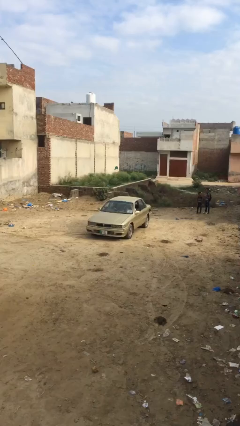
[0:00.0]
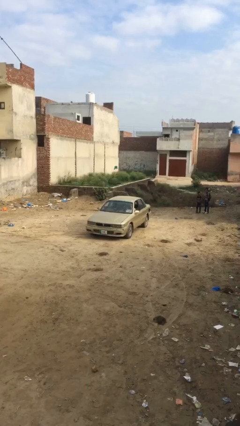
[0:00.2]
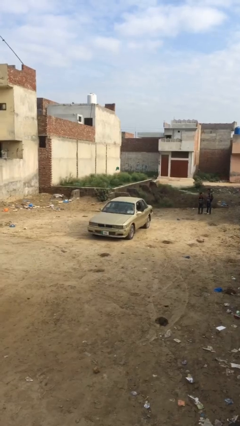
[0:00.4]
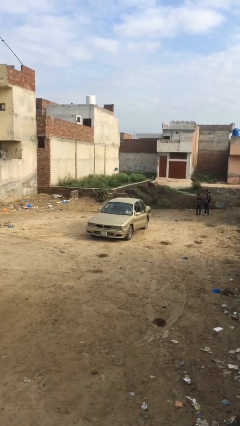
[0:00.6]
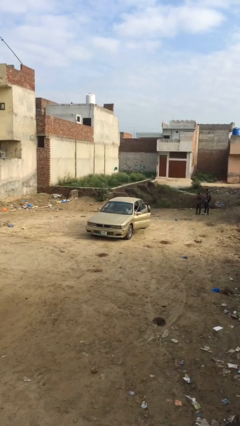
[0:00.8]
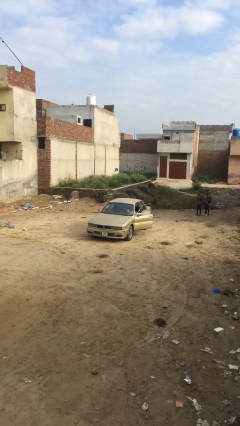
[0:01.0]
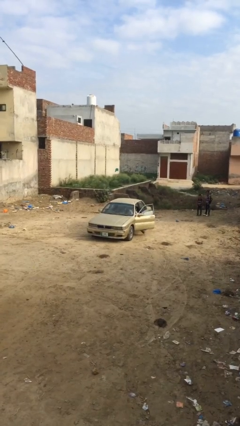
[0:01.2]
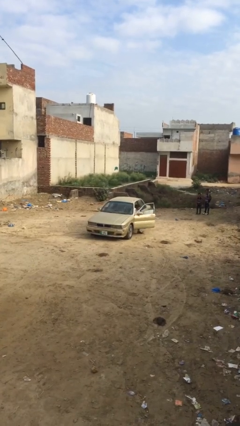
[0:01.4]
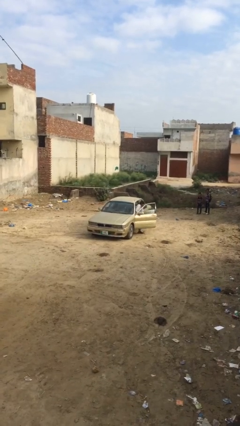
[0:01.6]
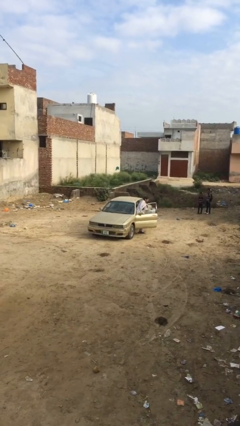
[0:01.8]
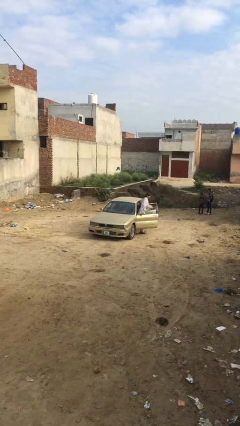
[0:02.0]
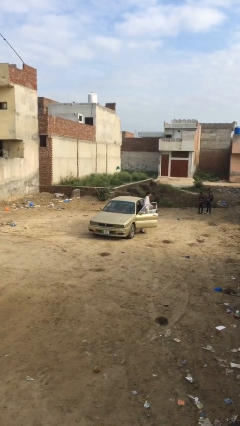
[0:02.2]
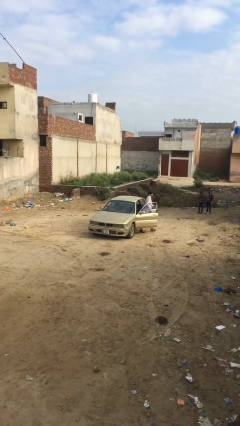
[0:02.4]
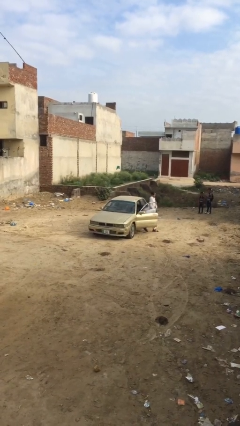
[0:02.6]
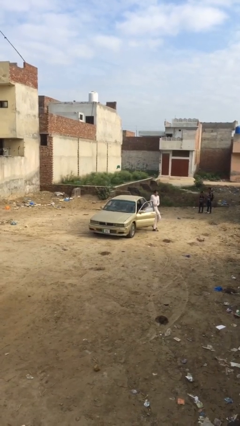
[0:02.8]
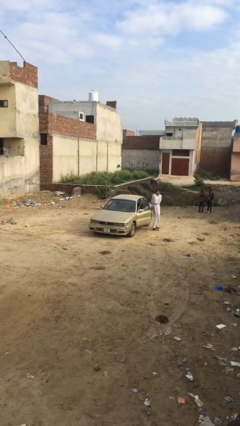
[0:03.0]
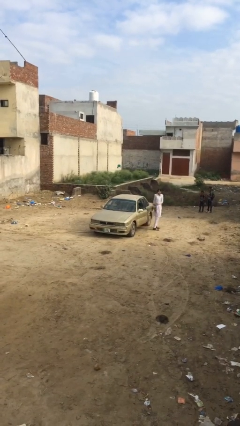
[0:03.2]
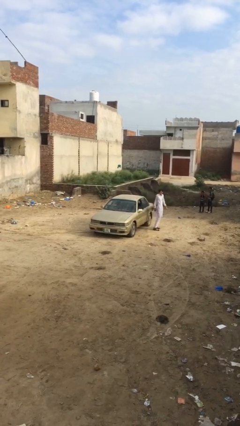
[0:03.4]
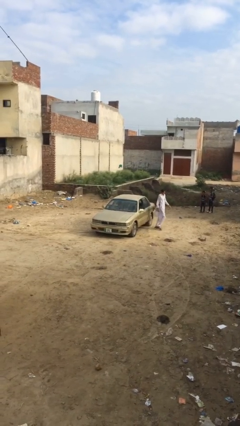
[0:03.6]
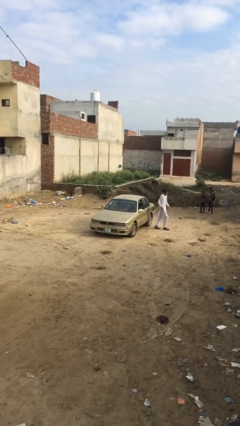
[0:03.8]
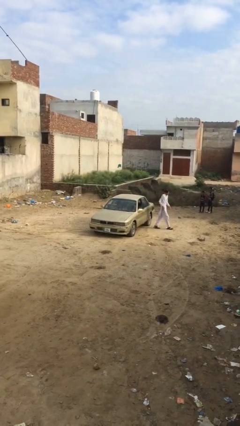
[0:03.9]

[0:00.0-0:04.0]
car drops off person

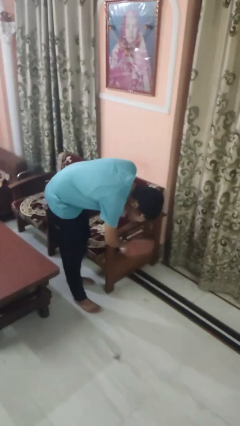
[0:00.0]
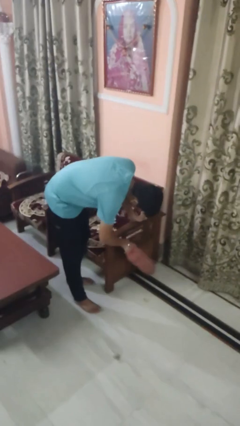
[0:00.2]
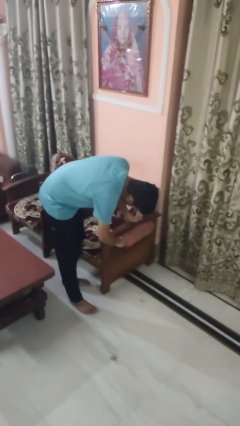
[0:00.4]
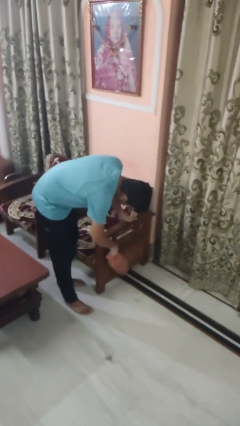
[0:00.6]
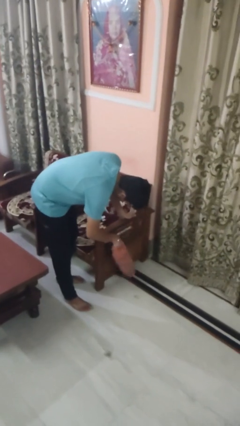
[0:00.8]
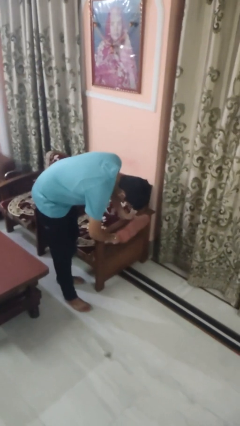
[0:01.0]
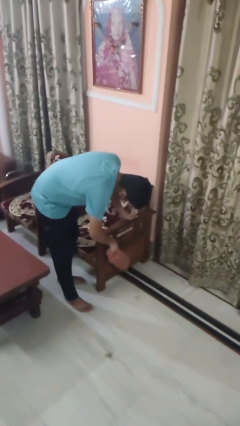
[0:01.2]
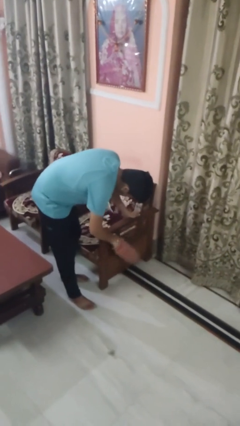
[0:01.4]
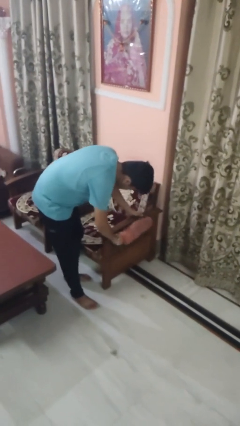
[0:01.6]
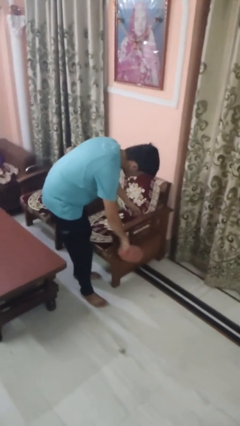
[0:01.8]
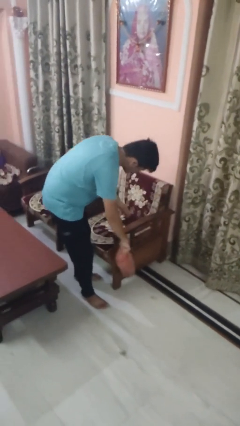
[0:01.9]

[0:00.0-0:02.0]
person dusts furniture

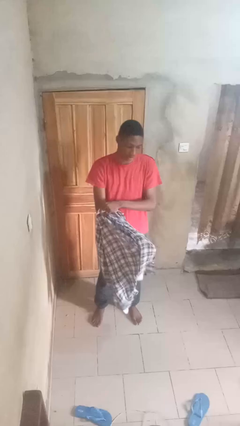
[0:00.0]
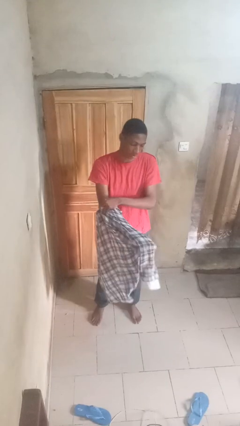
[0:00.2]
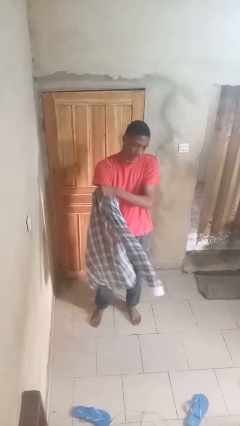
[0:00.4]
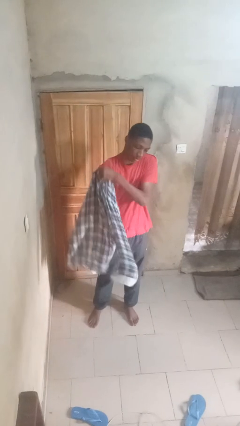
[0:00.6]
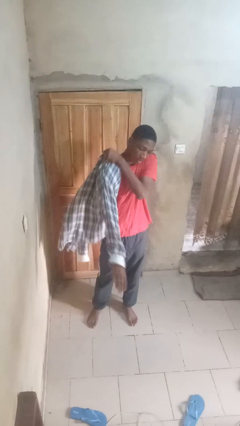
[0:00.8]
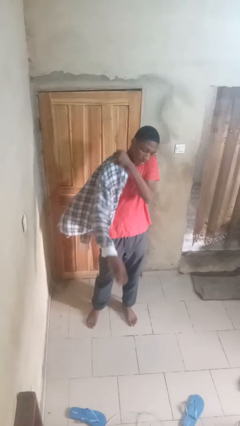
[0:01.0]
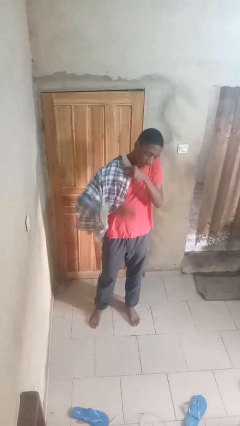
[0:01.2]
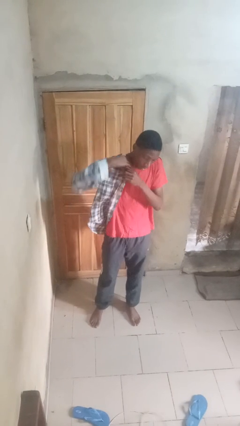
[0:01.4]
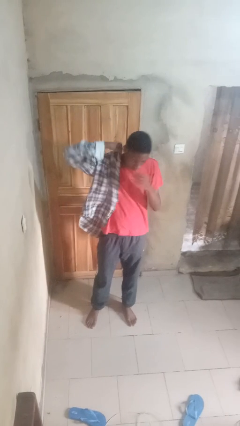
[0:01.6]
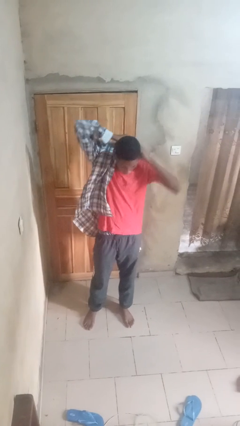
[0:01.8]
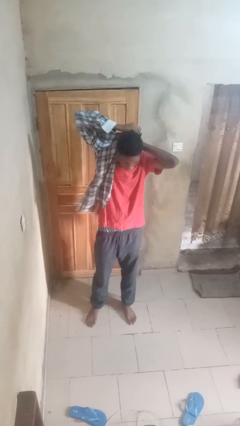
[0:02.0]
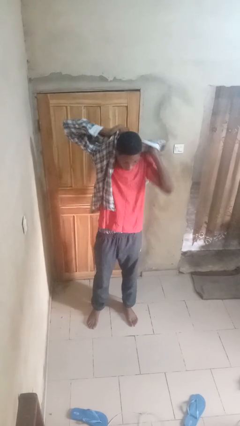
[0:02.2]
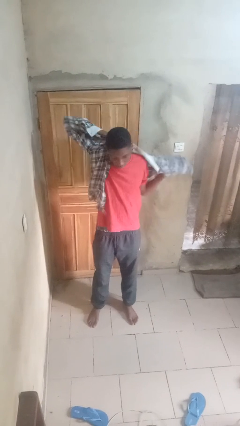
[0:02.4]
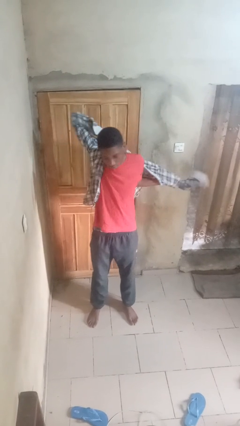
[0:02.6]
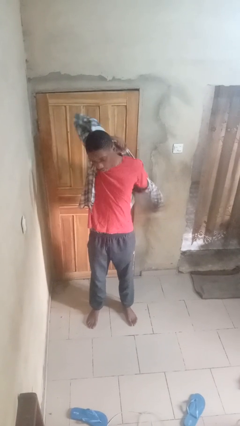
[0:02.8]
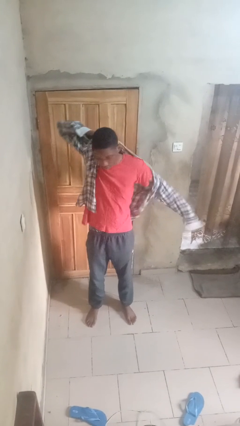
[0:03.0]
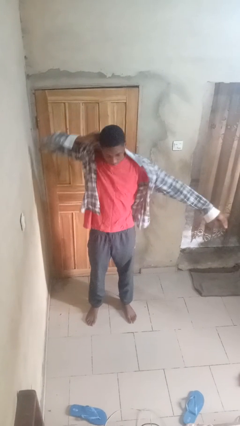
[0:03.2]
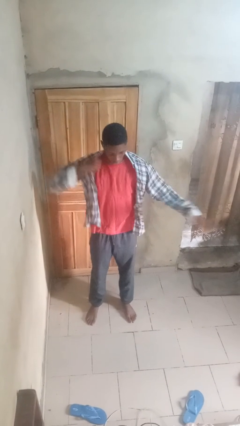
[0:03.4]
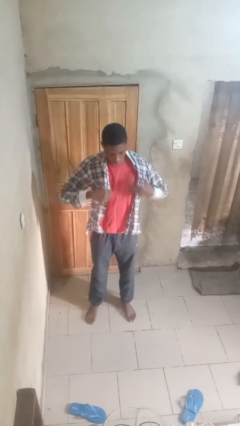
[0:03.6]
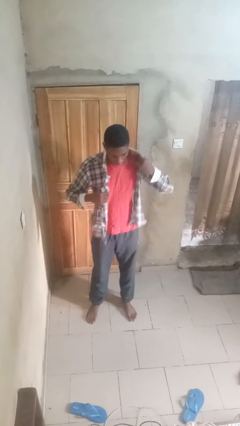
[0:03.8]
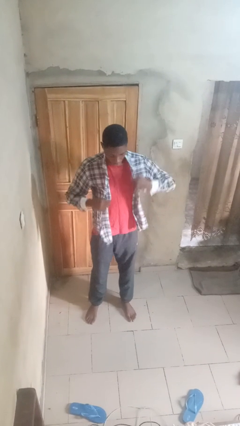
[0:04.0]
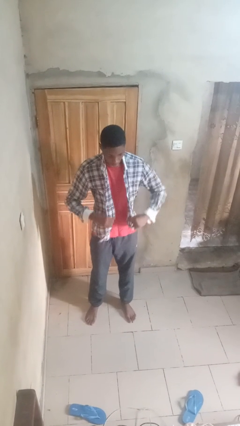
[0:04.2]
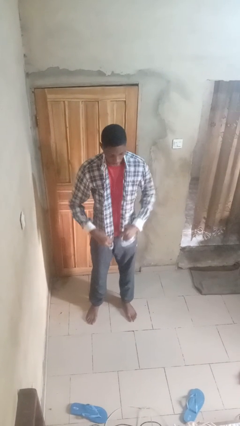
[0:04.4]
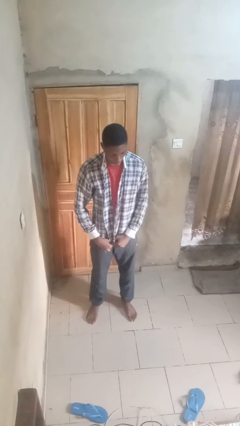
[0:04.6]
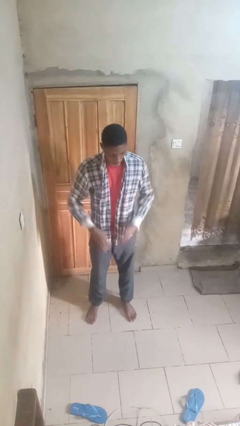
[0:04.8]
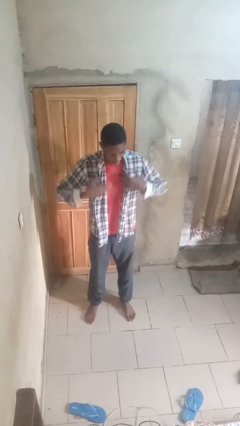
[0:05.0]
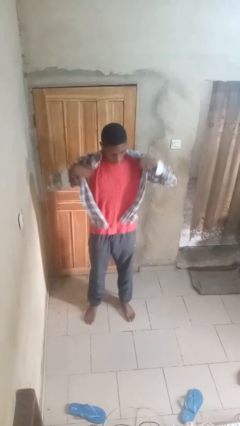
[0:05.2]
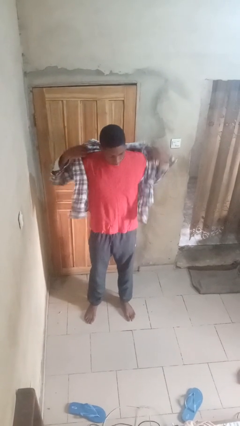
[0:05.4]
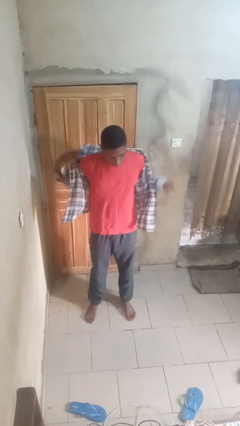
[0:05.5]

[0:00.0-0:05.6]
person puts on shirt

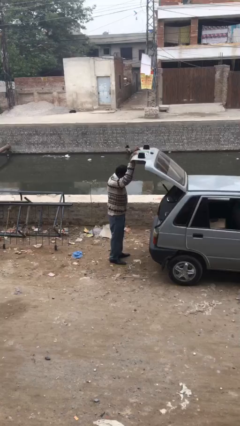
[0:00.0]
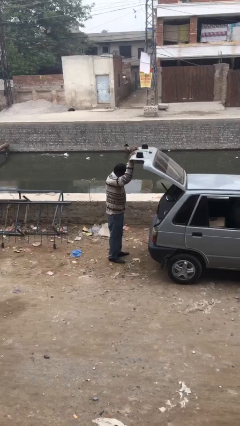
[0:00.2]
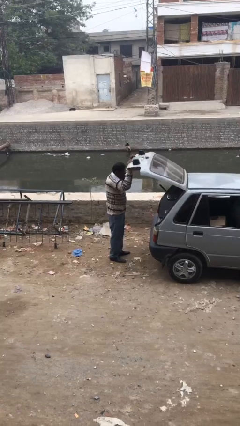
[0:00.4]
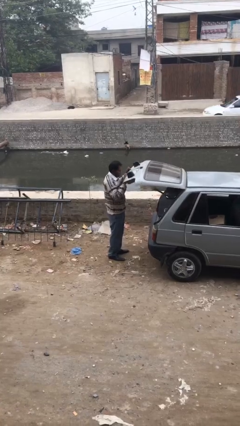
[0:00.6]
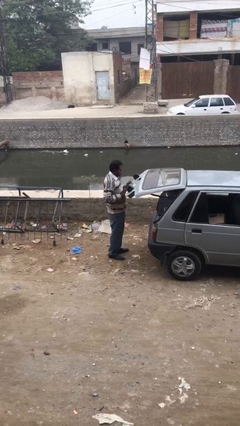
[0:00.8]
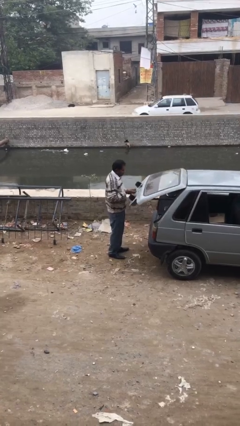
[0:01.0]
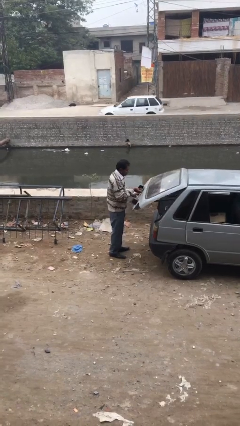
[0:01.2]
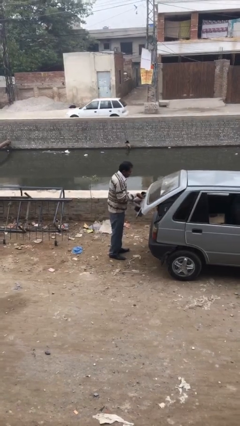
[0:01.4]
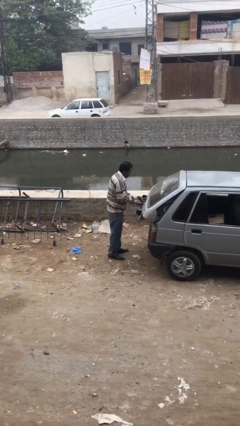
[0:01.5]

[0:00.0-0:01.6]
person closes car trunk

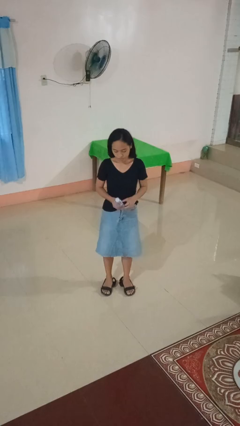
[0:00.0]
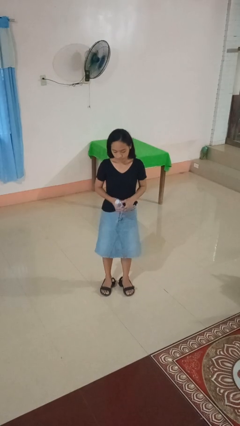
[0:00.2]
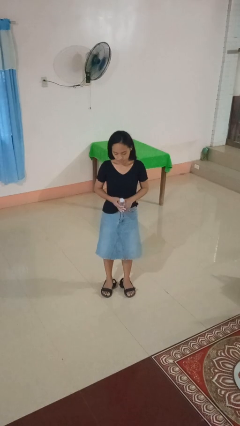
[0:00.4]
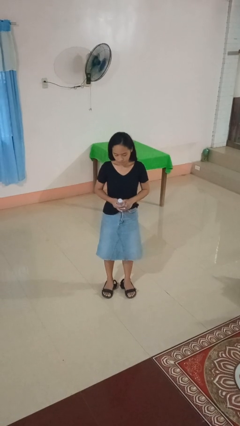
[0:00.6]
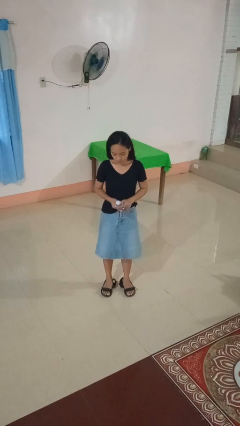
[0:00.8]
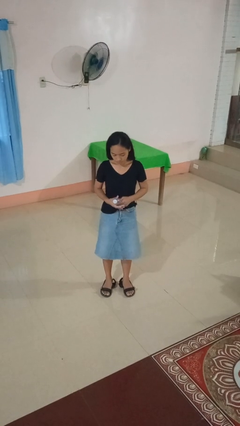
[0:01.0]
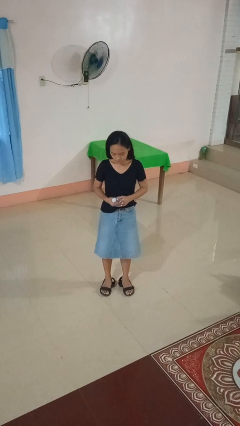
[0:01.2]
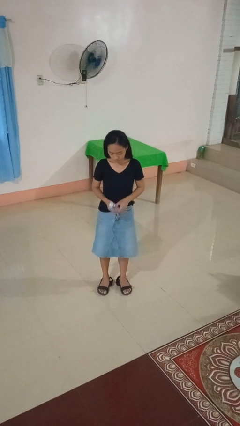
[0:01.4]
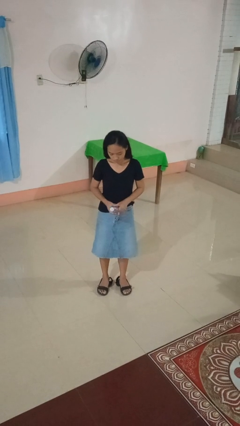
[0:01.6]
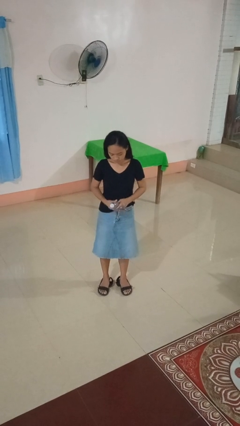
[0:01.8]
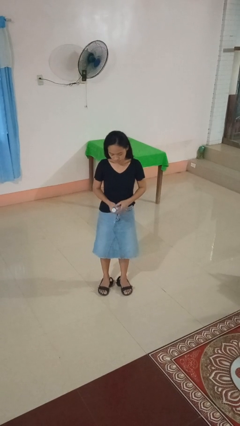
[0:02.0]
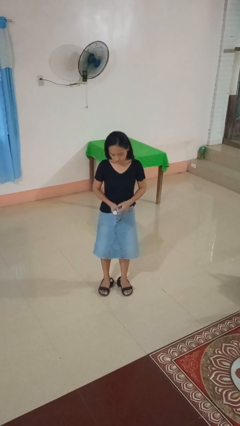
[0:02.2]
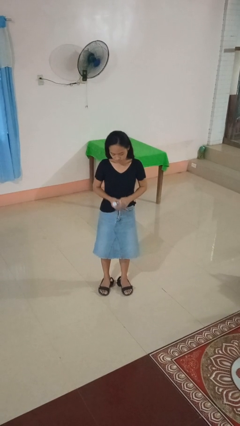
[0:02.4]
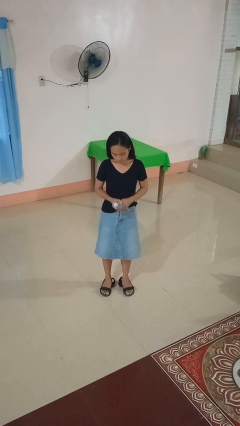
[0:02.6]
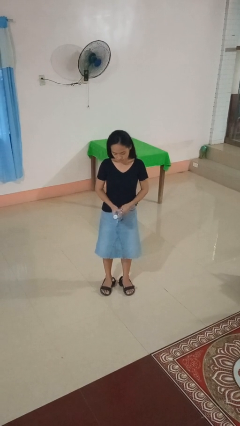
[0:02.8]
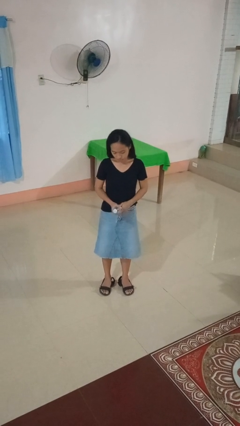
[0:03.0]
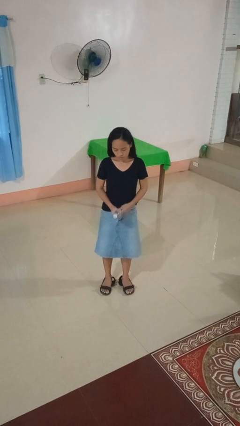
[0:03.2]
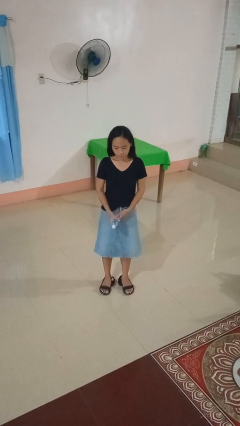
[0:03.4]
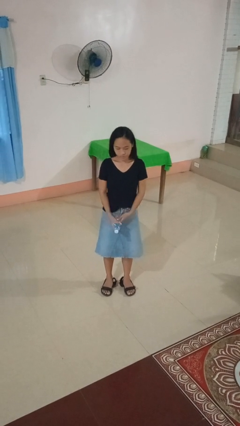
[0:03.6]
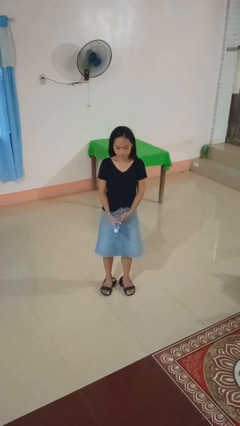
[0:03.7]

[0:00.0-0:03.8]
person squeezes object

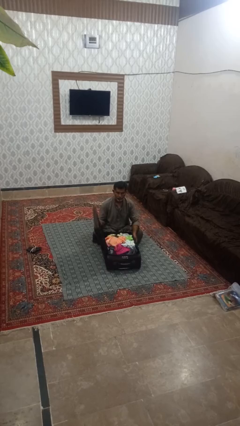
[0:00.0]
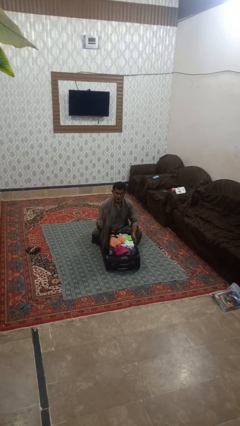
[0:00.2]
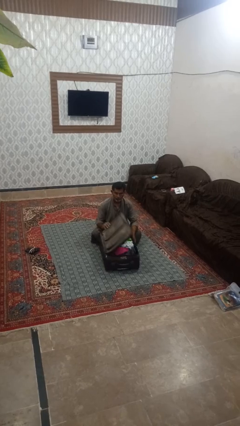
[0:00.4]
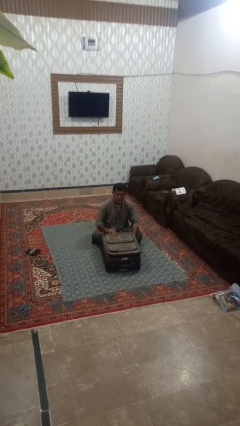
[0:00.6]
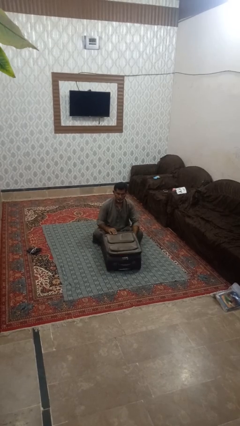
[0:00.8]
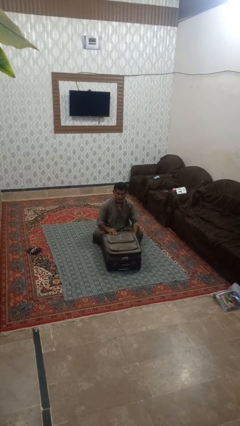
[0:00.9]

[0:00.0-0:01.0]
person closes suitcase
